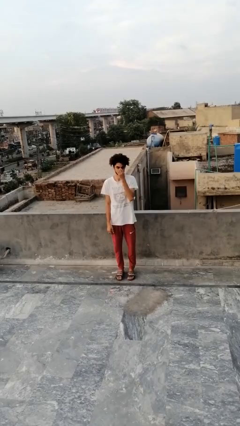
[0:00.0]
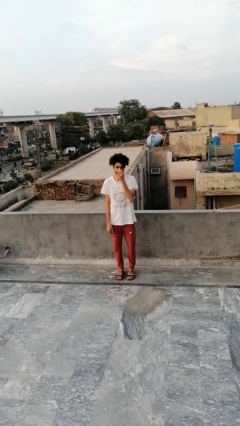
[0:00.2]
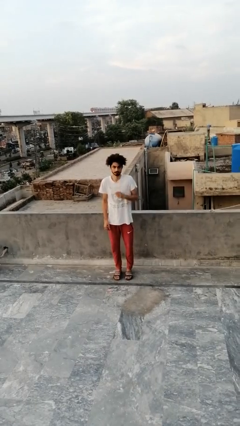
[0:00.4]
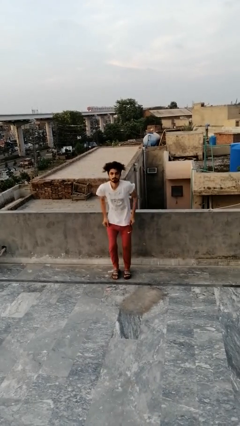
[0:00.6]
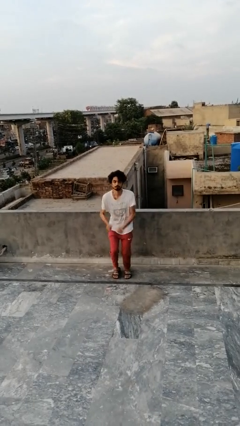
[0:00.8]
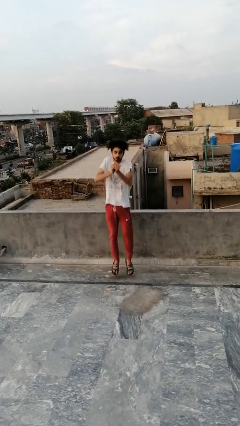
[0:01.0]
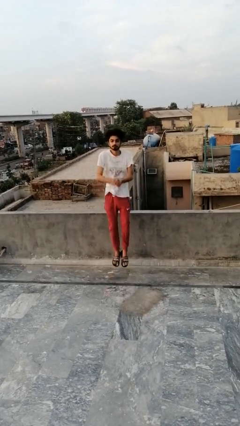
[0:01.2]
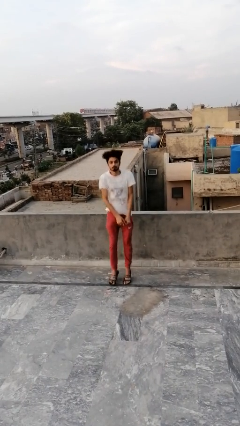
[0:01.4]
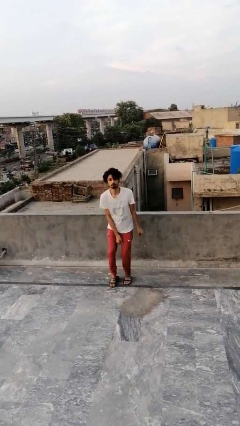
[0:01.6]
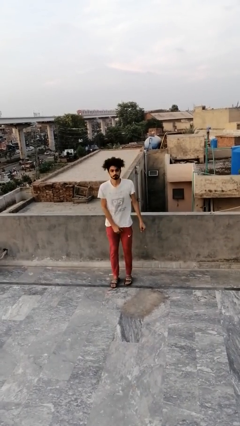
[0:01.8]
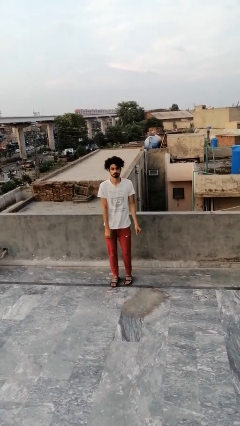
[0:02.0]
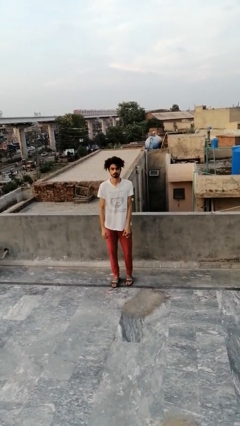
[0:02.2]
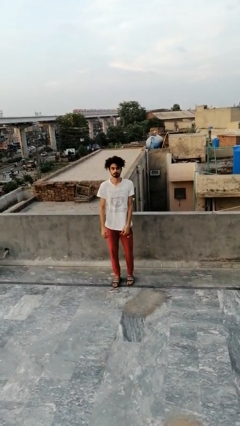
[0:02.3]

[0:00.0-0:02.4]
person jumps

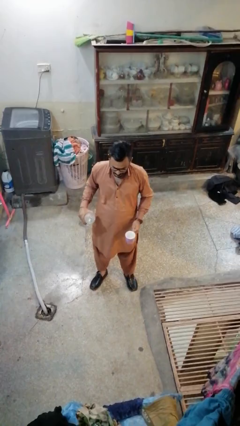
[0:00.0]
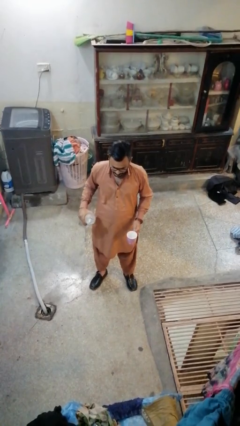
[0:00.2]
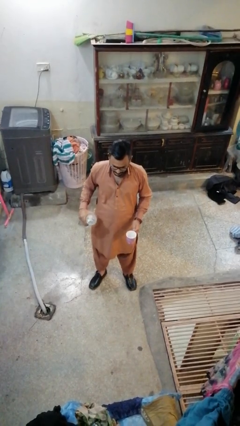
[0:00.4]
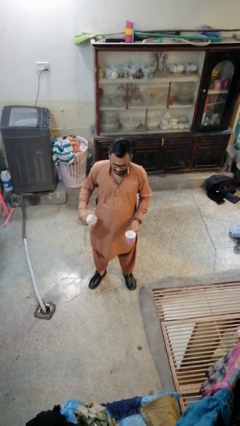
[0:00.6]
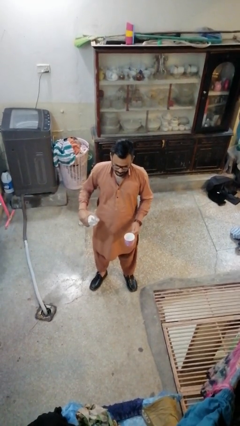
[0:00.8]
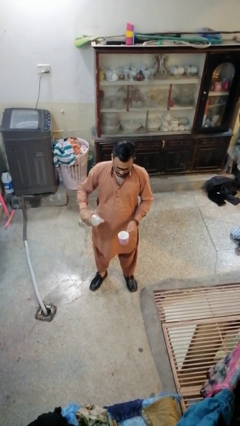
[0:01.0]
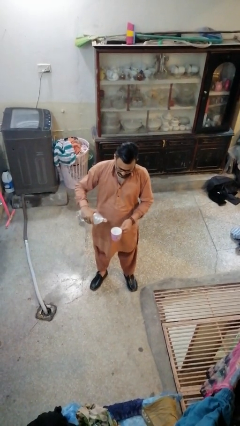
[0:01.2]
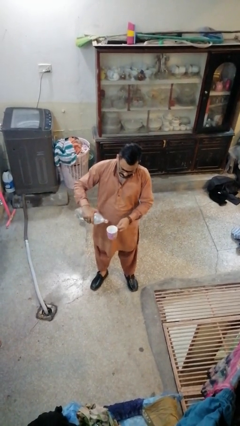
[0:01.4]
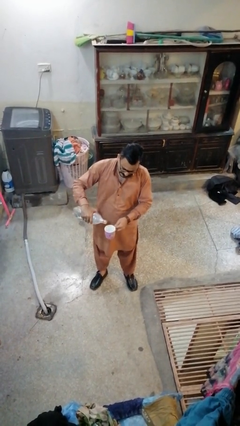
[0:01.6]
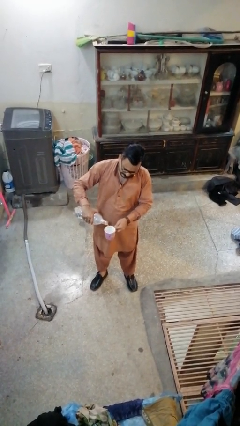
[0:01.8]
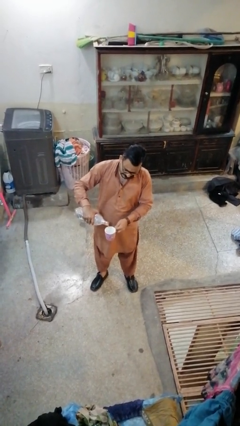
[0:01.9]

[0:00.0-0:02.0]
person pours liquid into cup

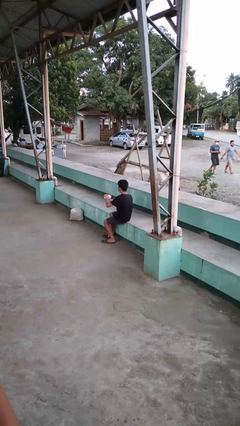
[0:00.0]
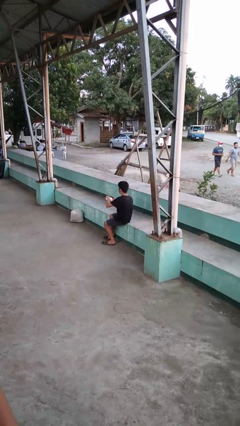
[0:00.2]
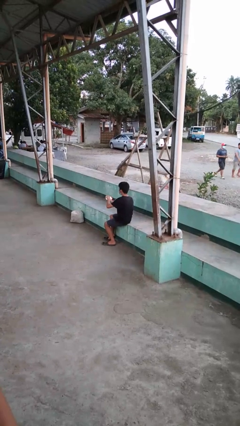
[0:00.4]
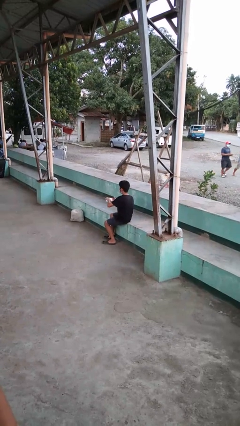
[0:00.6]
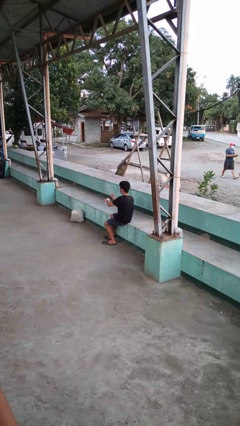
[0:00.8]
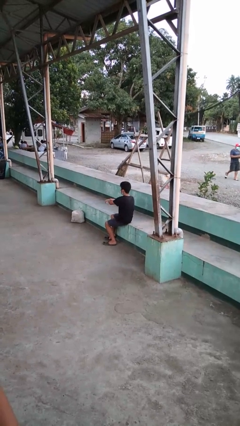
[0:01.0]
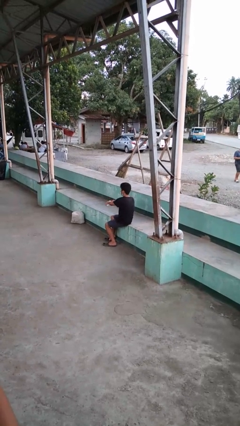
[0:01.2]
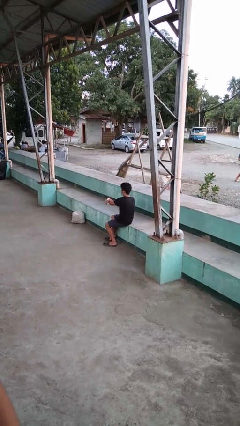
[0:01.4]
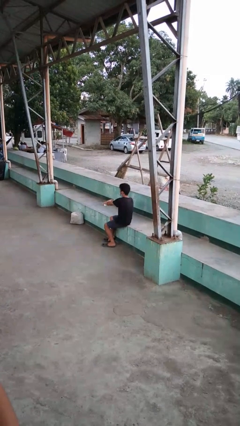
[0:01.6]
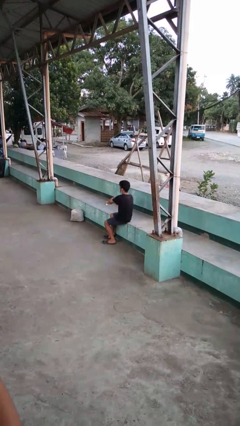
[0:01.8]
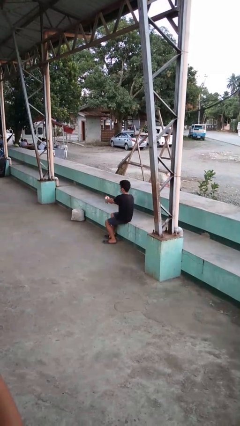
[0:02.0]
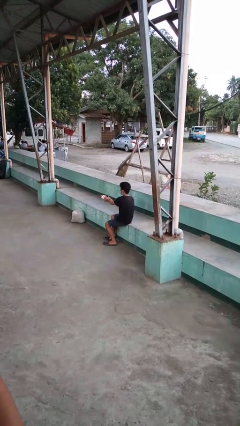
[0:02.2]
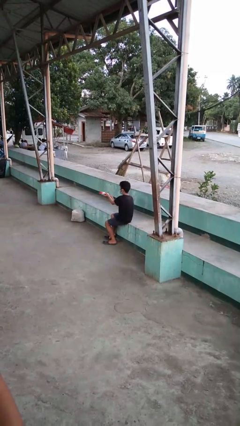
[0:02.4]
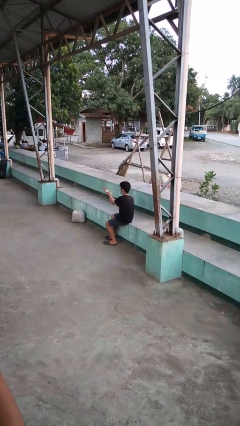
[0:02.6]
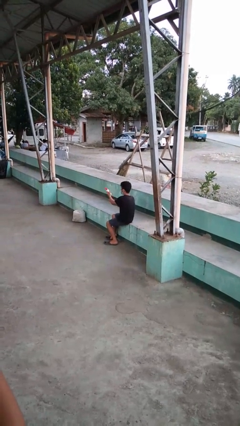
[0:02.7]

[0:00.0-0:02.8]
person applies sunscreen

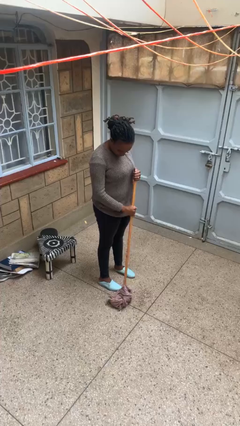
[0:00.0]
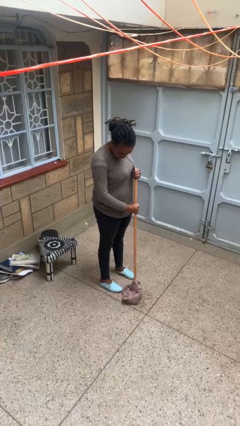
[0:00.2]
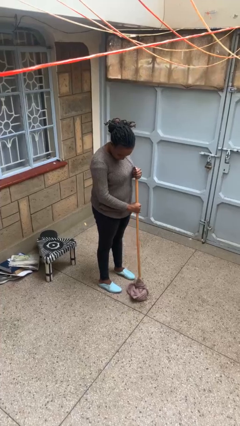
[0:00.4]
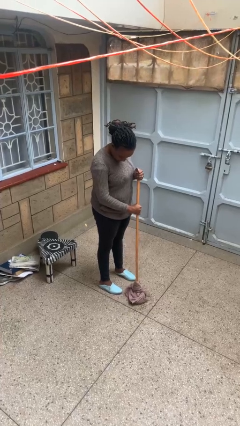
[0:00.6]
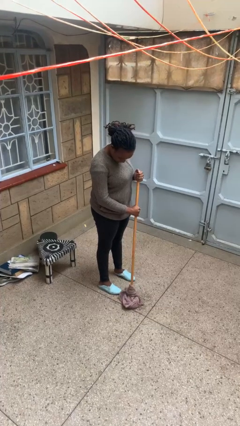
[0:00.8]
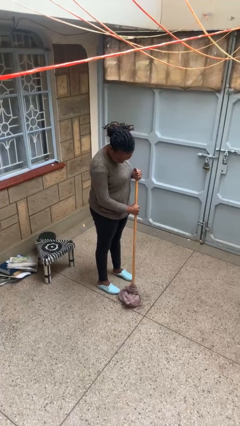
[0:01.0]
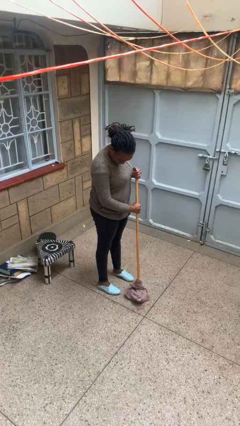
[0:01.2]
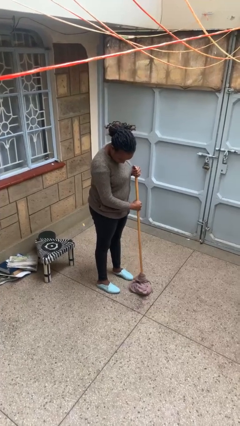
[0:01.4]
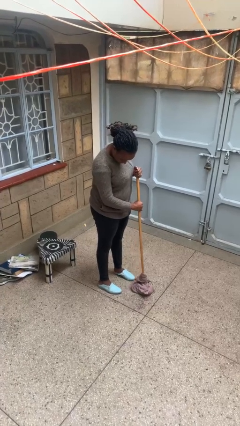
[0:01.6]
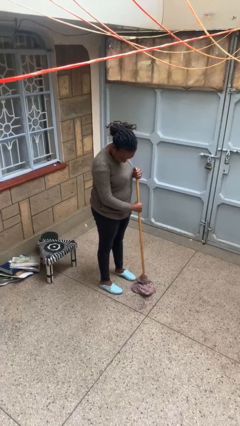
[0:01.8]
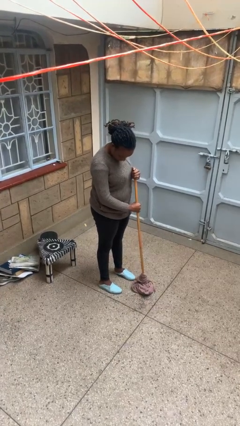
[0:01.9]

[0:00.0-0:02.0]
person mops

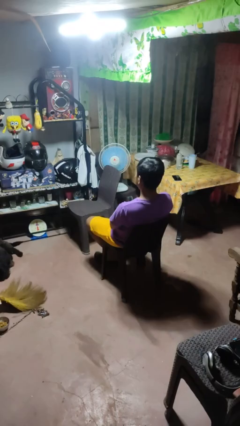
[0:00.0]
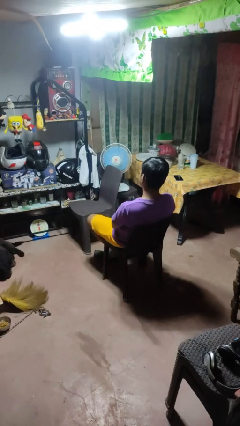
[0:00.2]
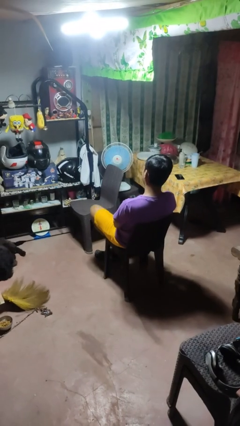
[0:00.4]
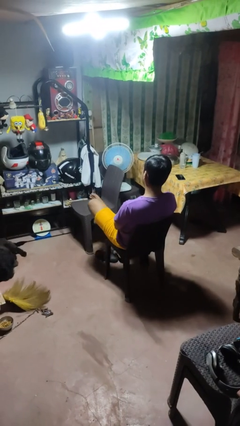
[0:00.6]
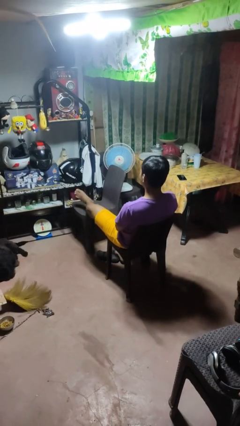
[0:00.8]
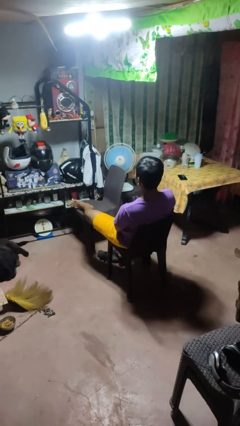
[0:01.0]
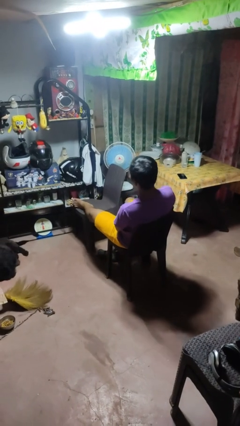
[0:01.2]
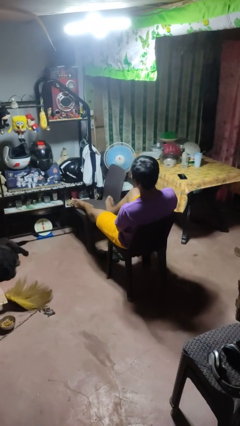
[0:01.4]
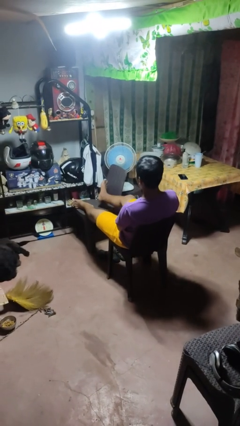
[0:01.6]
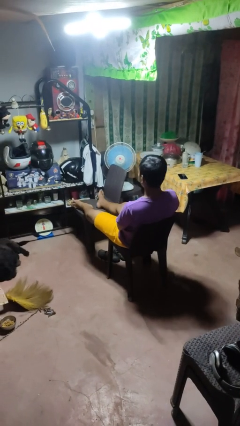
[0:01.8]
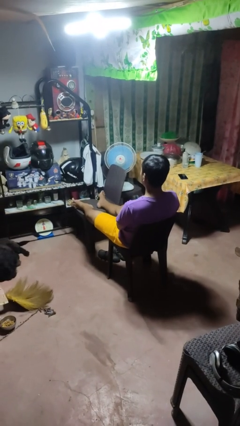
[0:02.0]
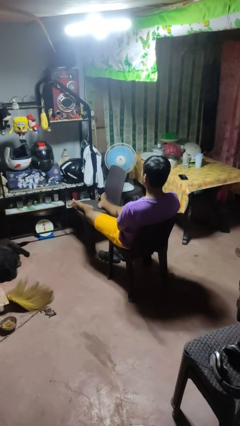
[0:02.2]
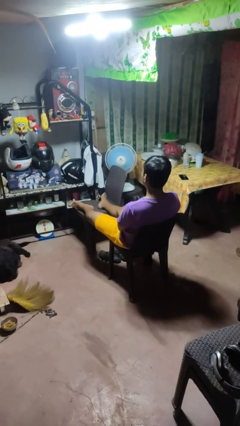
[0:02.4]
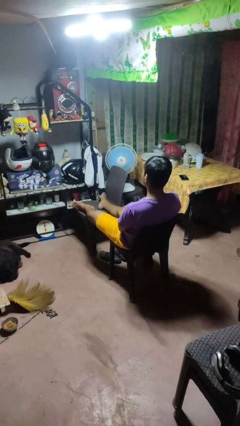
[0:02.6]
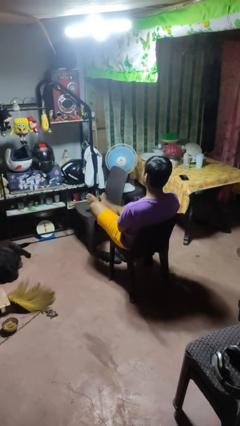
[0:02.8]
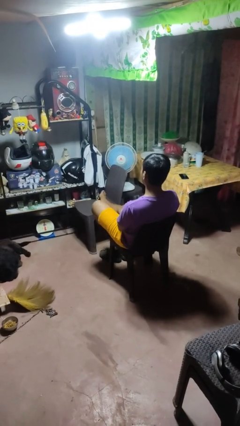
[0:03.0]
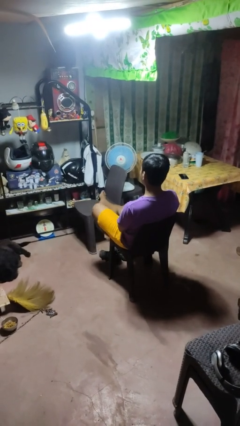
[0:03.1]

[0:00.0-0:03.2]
person puts feet up

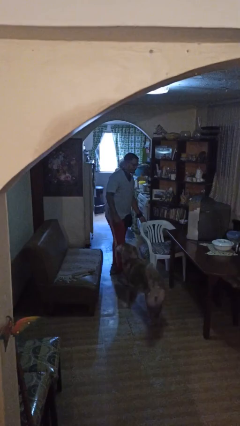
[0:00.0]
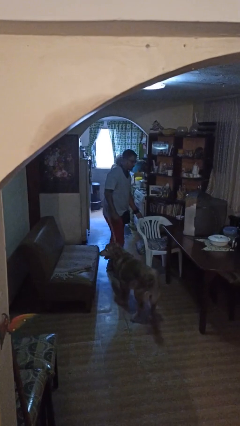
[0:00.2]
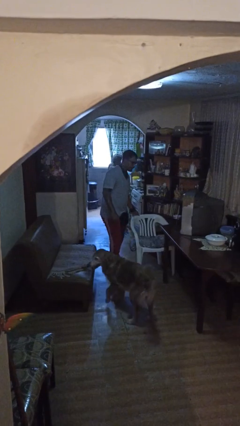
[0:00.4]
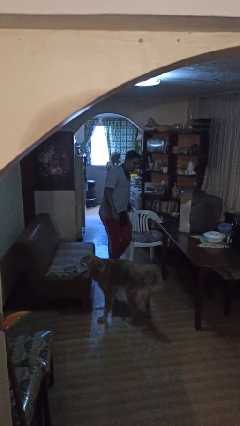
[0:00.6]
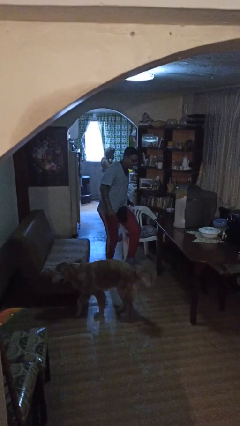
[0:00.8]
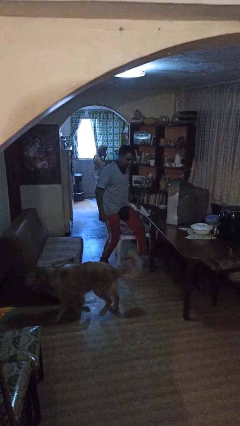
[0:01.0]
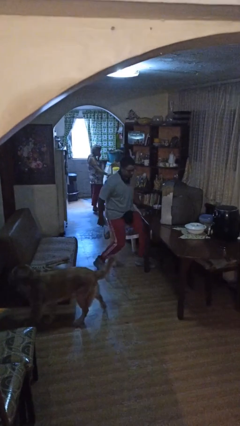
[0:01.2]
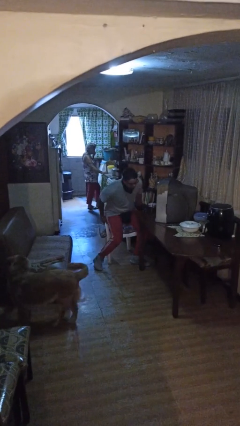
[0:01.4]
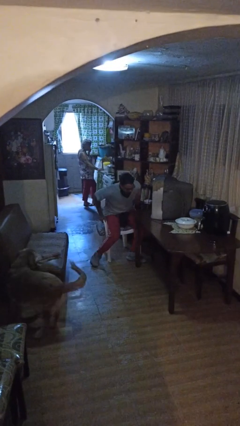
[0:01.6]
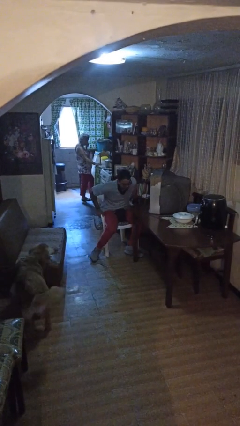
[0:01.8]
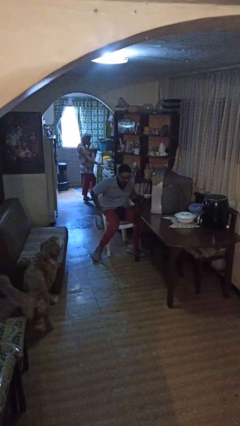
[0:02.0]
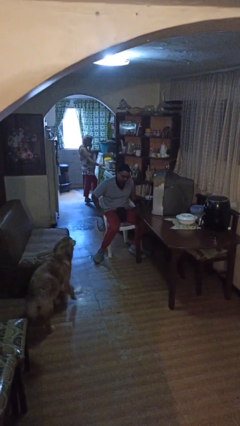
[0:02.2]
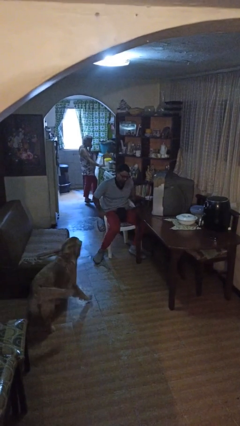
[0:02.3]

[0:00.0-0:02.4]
person sits down

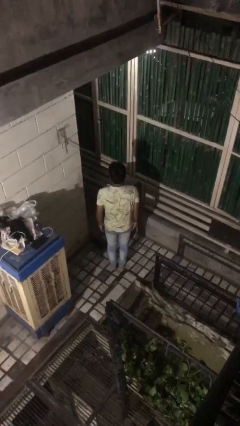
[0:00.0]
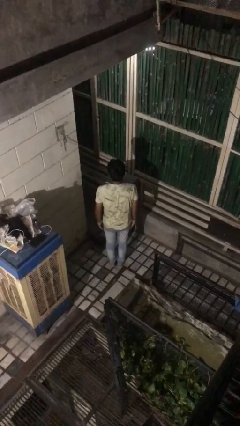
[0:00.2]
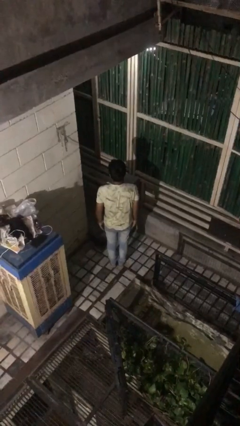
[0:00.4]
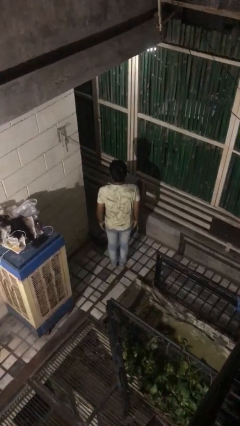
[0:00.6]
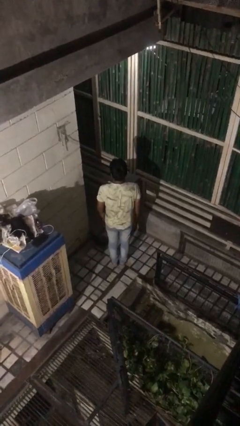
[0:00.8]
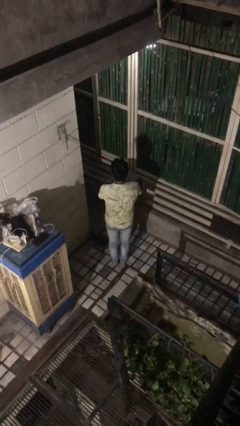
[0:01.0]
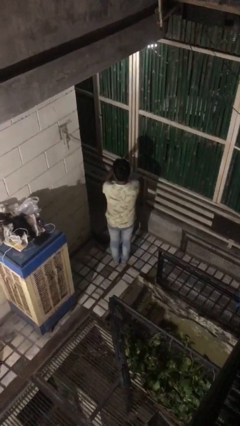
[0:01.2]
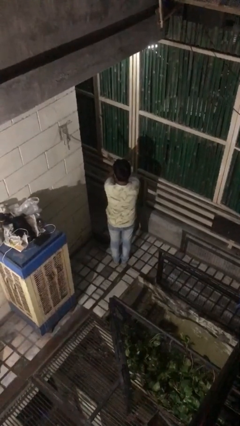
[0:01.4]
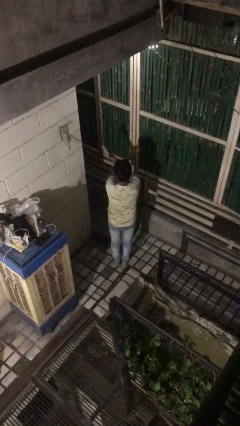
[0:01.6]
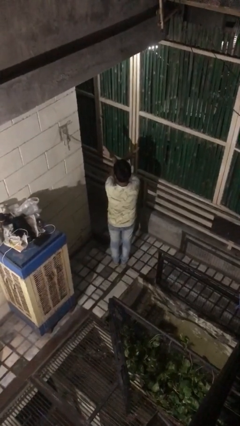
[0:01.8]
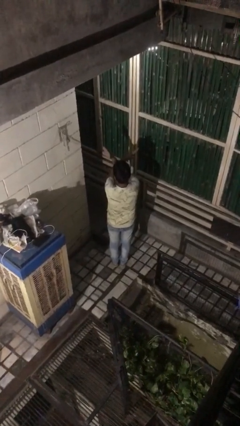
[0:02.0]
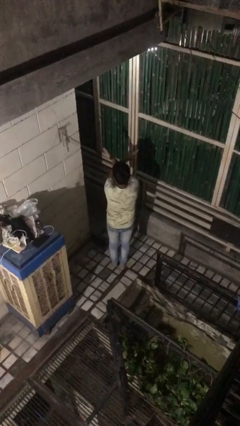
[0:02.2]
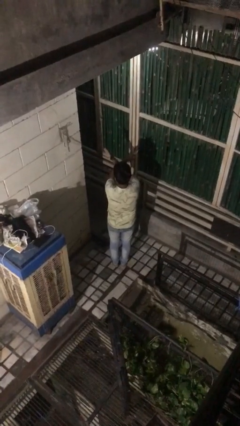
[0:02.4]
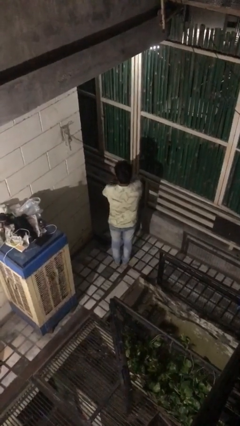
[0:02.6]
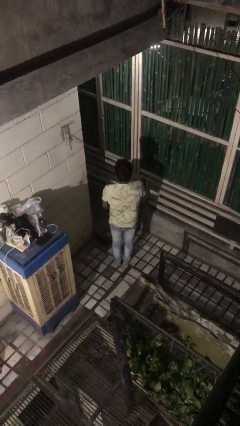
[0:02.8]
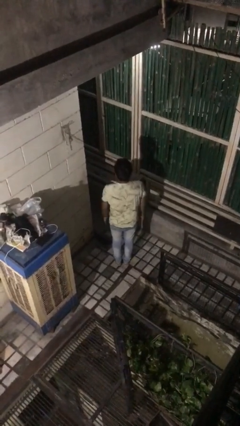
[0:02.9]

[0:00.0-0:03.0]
person gestures arms x
